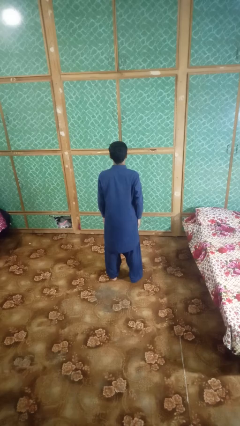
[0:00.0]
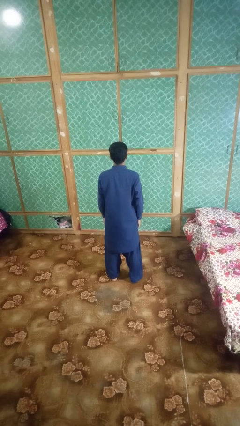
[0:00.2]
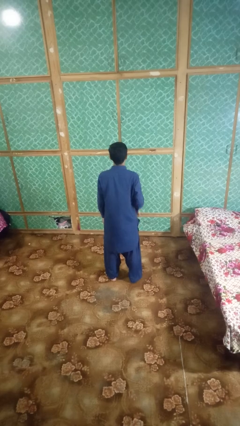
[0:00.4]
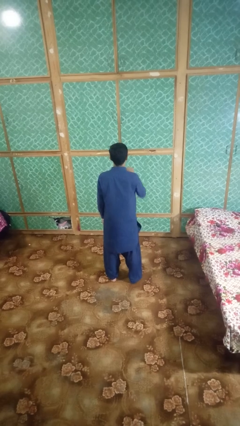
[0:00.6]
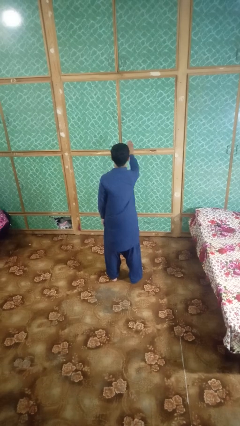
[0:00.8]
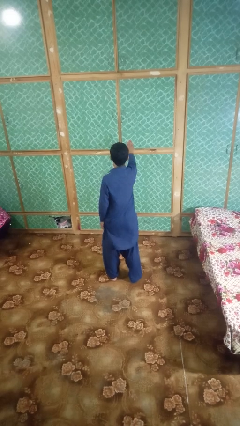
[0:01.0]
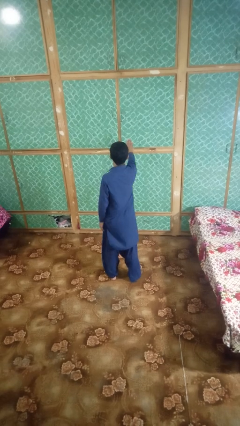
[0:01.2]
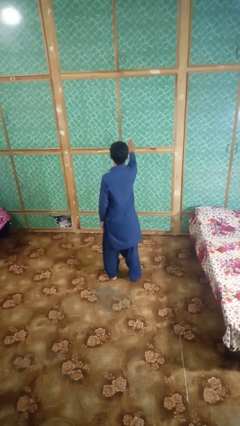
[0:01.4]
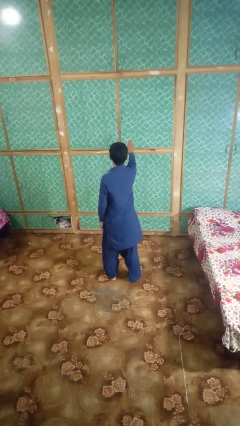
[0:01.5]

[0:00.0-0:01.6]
person gestures stop

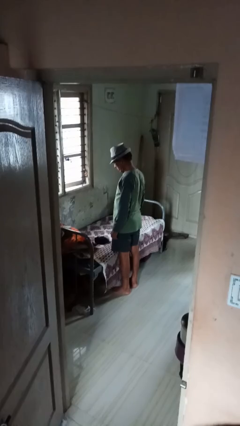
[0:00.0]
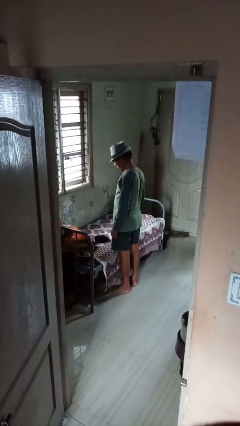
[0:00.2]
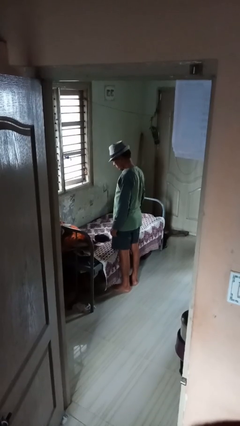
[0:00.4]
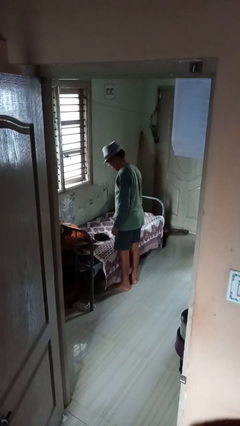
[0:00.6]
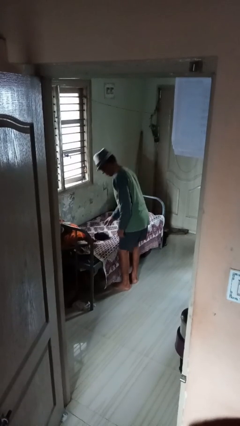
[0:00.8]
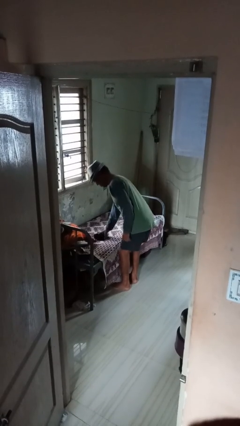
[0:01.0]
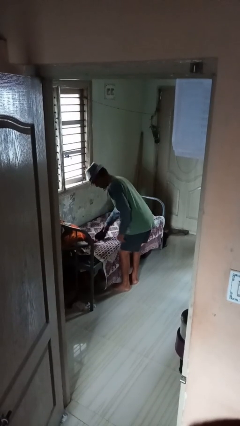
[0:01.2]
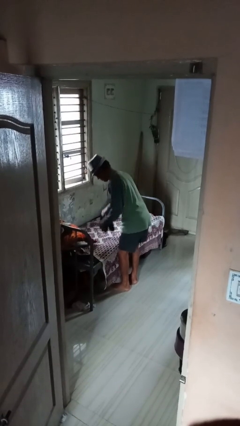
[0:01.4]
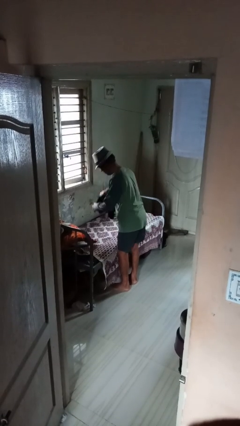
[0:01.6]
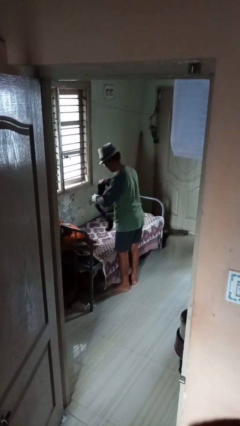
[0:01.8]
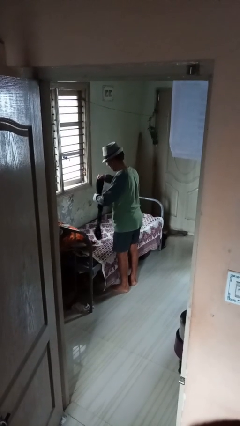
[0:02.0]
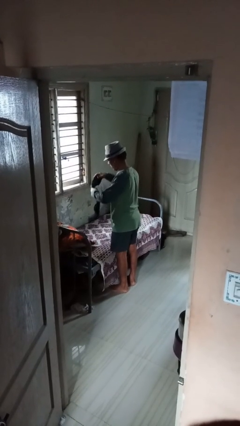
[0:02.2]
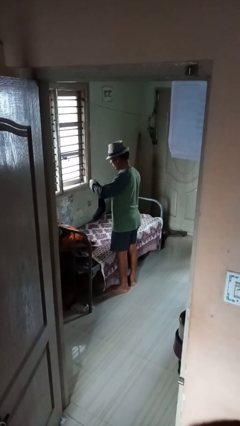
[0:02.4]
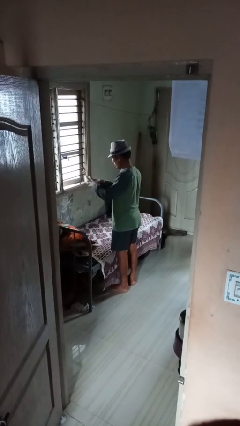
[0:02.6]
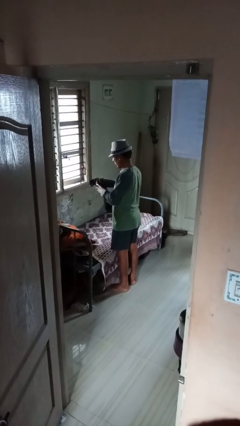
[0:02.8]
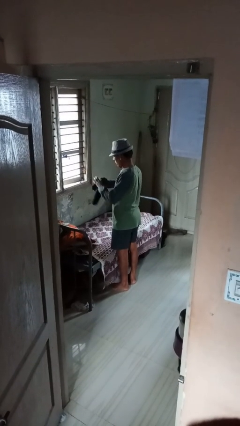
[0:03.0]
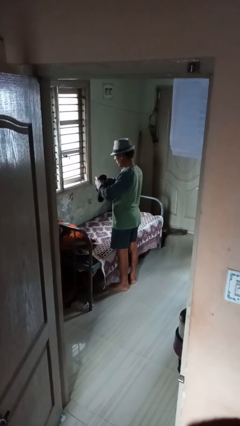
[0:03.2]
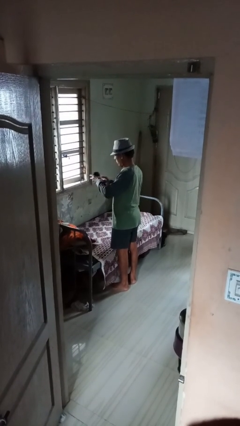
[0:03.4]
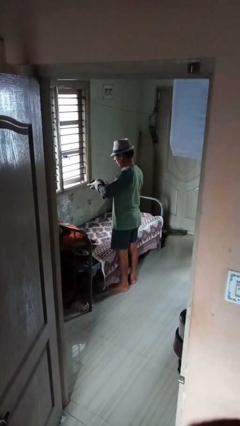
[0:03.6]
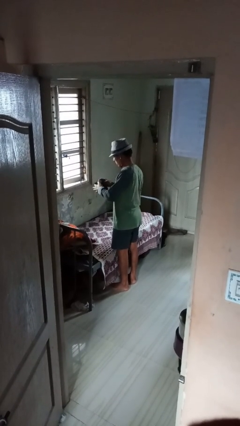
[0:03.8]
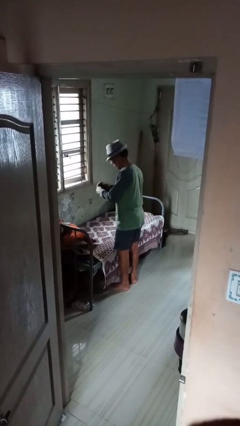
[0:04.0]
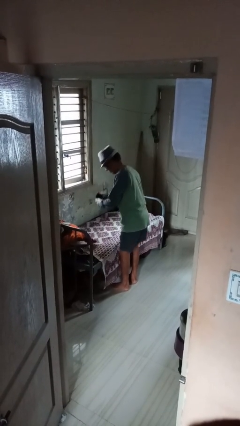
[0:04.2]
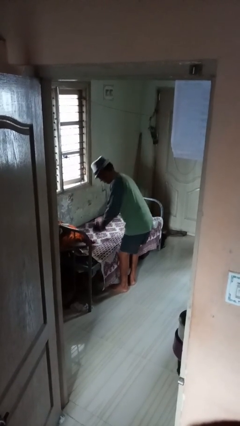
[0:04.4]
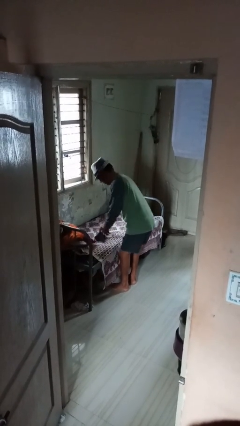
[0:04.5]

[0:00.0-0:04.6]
person folds socks

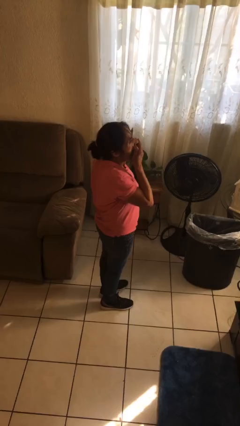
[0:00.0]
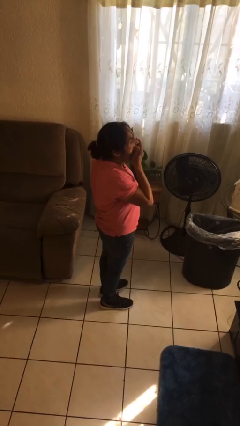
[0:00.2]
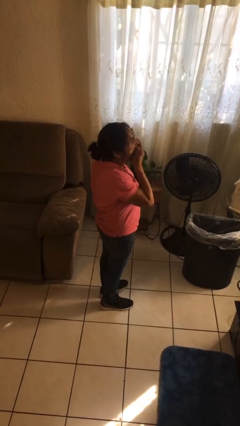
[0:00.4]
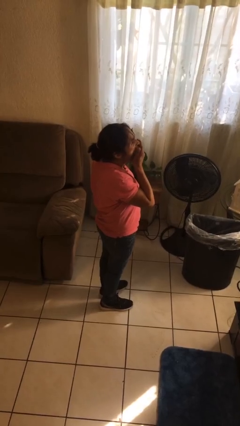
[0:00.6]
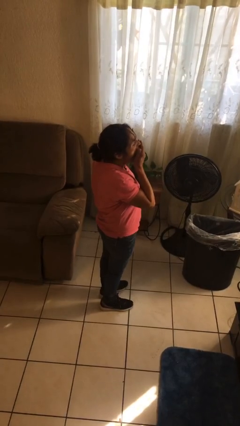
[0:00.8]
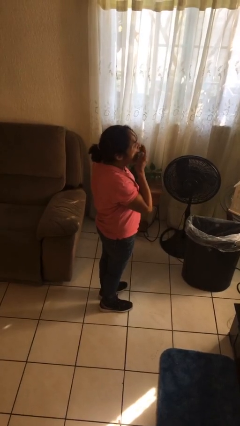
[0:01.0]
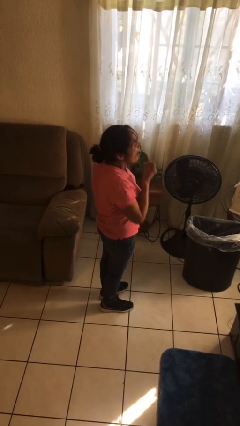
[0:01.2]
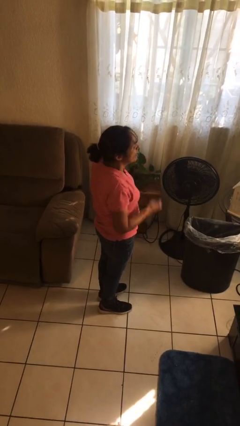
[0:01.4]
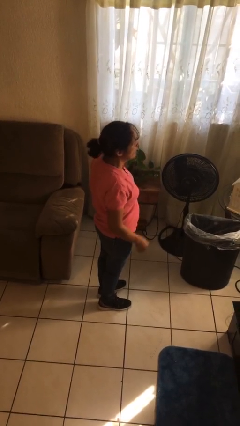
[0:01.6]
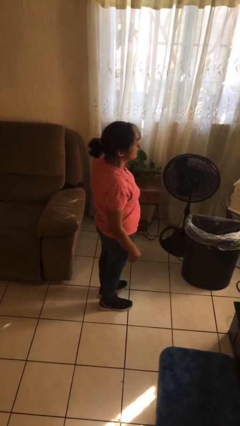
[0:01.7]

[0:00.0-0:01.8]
person yawns

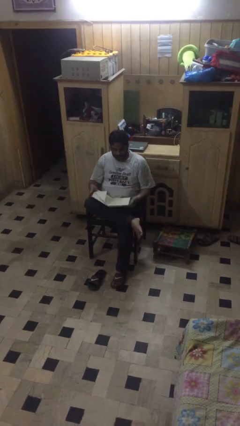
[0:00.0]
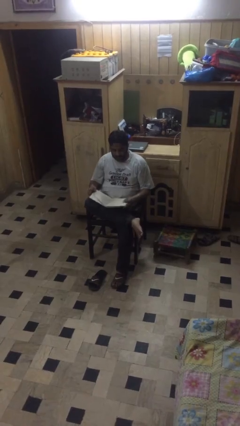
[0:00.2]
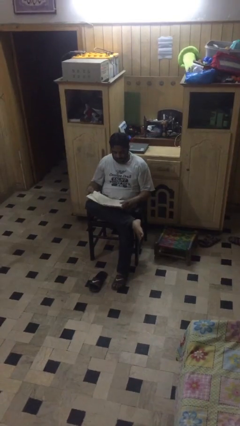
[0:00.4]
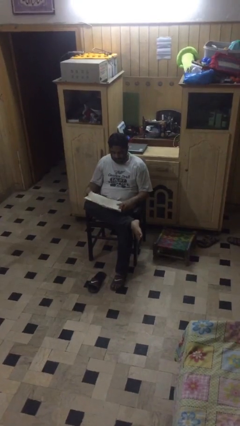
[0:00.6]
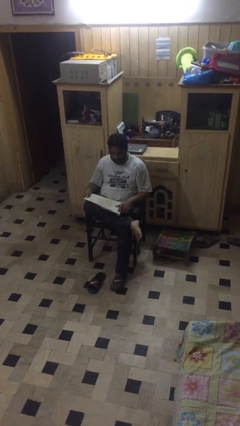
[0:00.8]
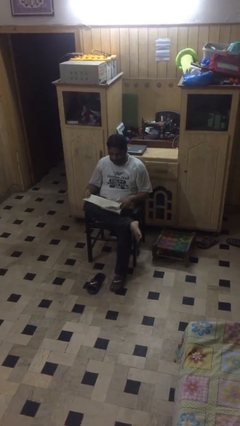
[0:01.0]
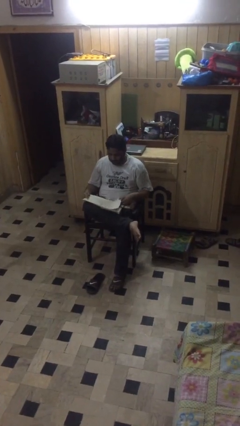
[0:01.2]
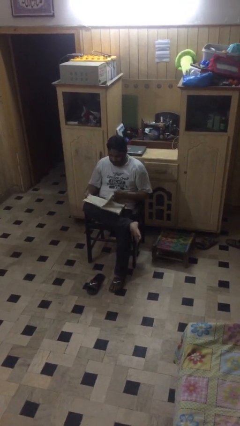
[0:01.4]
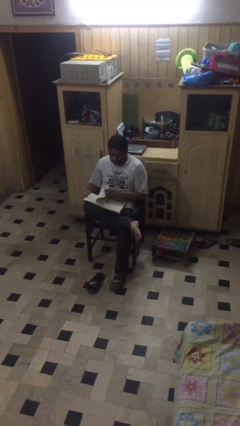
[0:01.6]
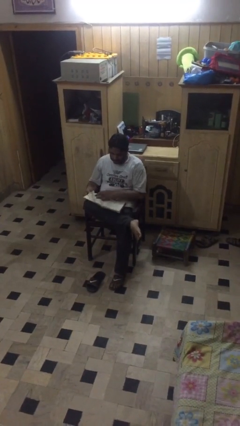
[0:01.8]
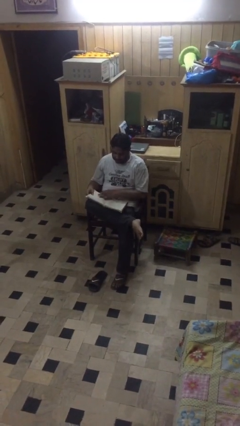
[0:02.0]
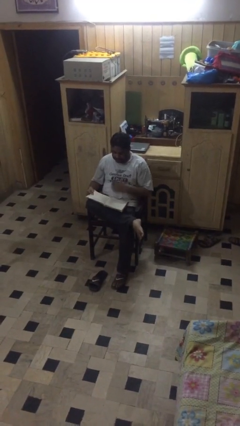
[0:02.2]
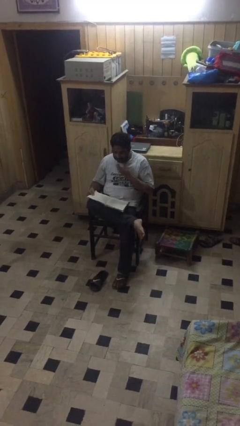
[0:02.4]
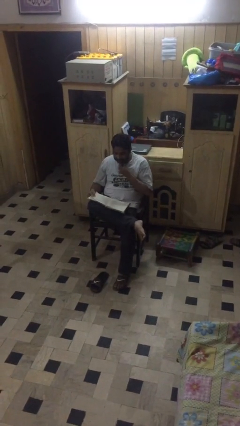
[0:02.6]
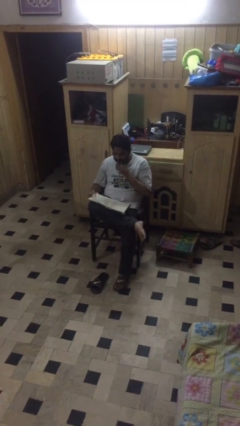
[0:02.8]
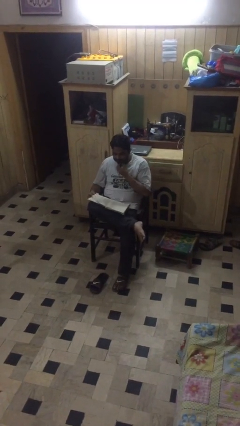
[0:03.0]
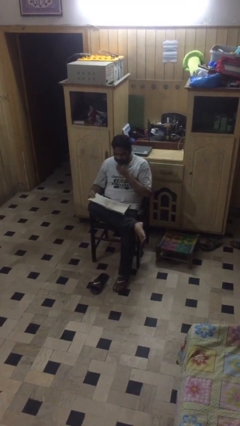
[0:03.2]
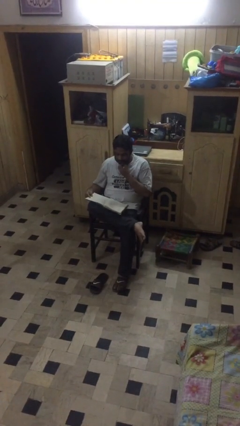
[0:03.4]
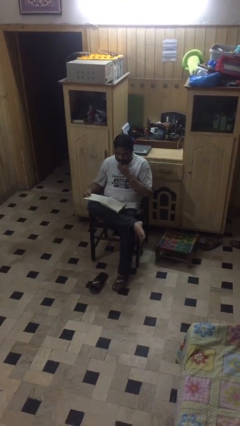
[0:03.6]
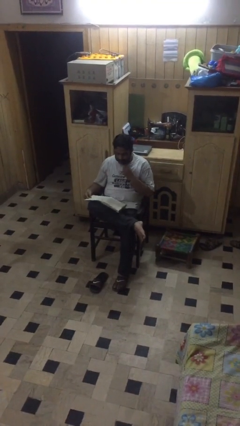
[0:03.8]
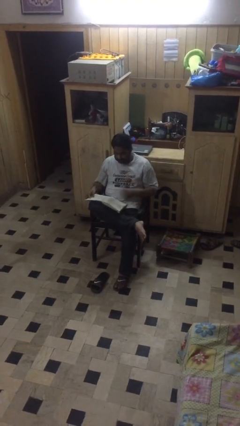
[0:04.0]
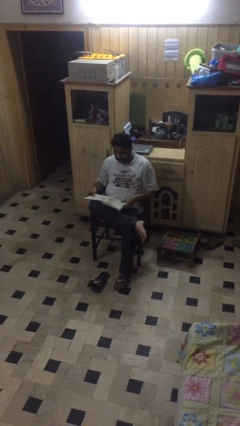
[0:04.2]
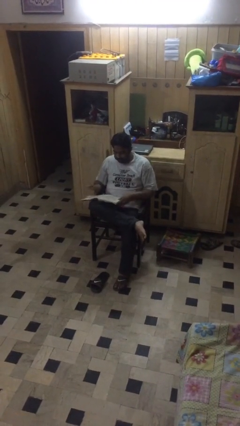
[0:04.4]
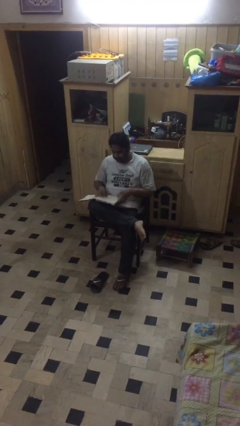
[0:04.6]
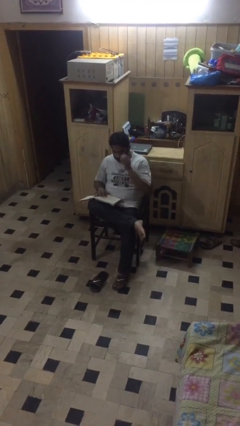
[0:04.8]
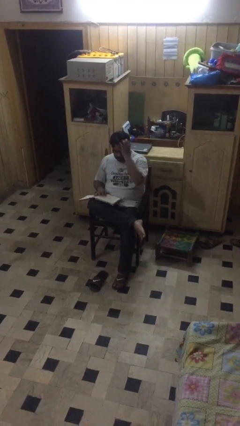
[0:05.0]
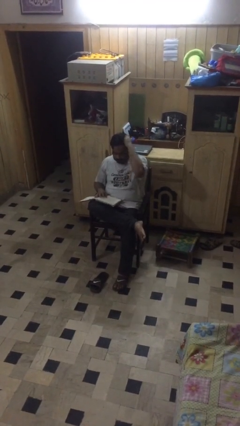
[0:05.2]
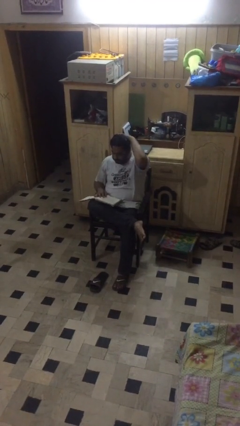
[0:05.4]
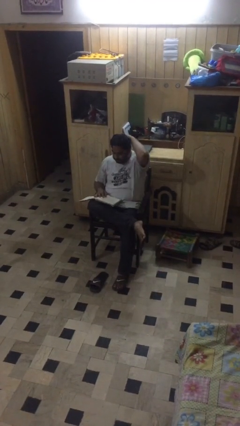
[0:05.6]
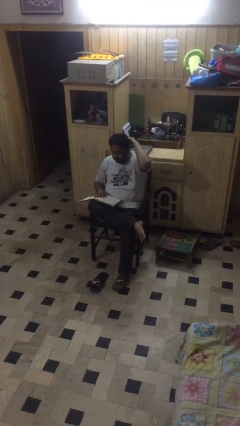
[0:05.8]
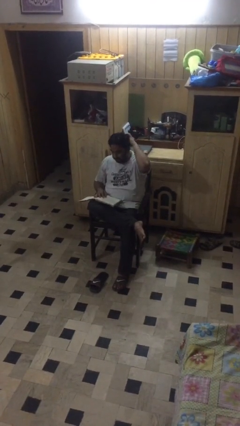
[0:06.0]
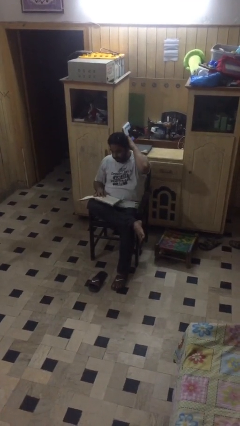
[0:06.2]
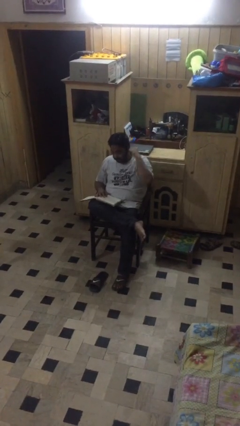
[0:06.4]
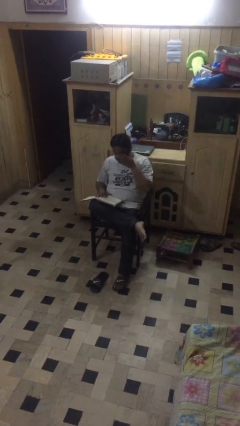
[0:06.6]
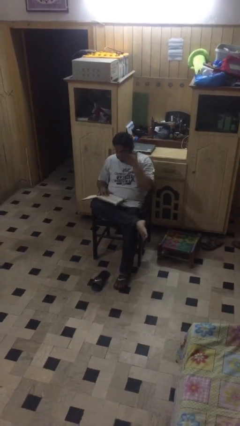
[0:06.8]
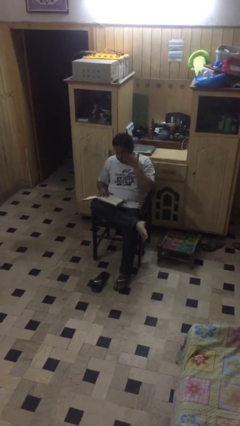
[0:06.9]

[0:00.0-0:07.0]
person reads document

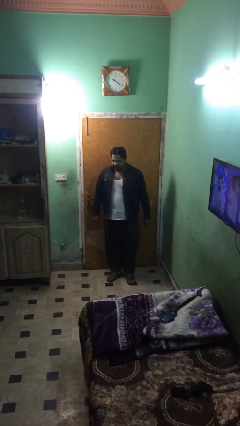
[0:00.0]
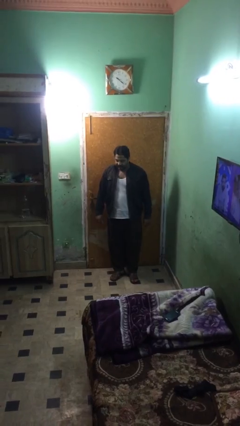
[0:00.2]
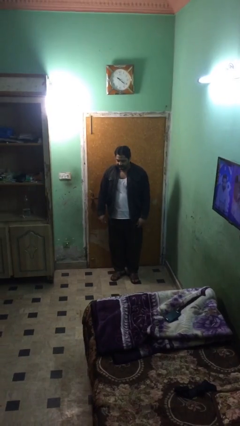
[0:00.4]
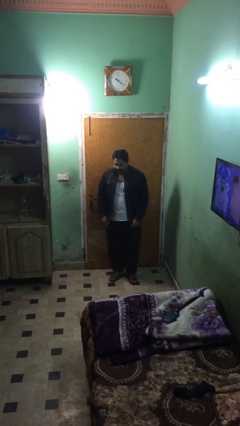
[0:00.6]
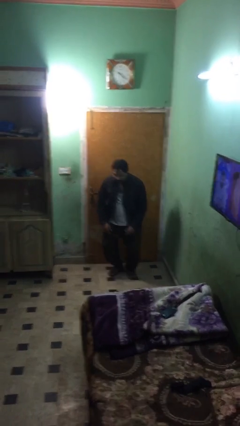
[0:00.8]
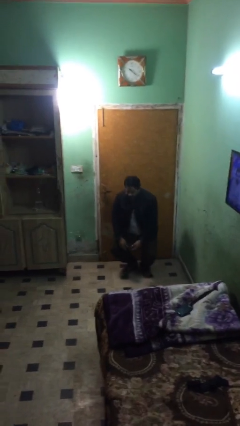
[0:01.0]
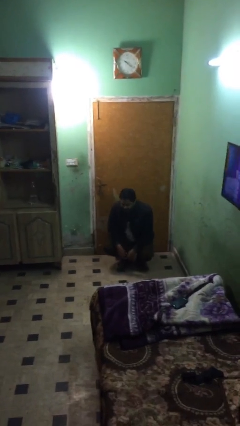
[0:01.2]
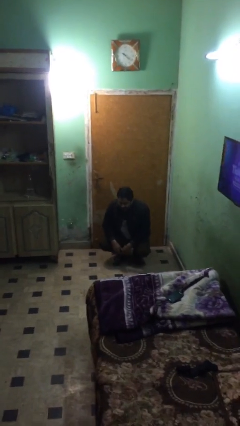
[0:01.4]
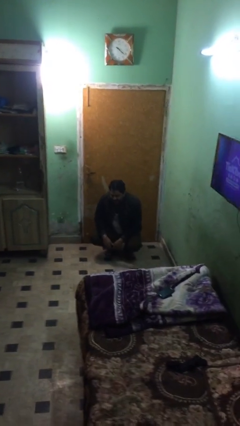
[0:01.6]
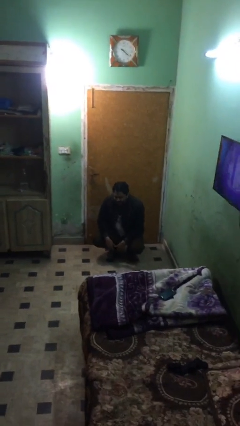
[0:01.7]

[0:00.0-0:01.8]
person sits down

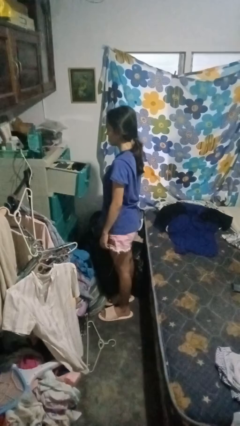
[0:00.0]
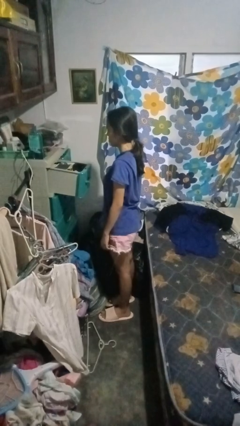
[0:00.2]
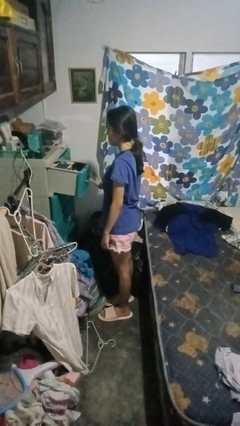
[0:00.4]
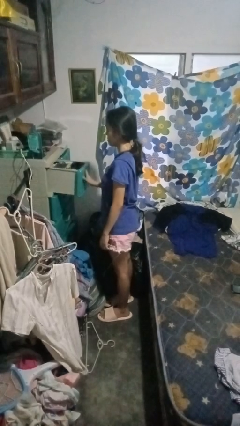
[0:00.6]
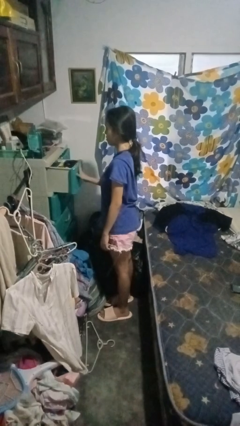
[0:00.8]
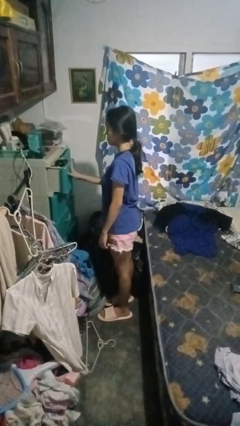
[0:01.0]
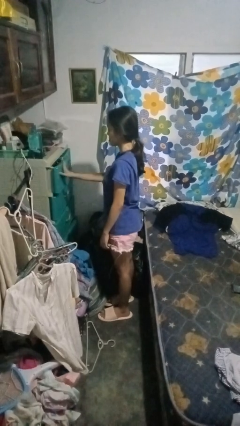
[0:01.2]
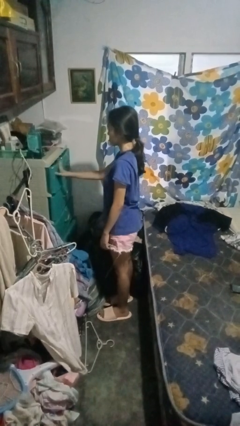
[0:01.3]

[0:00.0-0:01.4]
person closes dresser drawer
